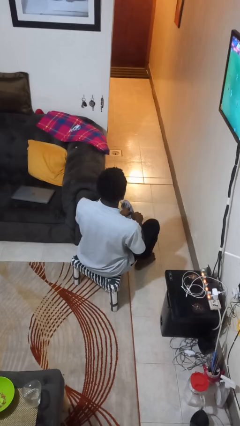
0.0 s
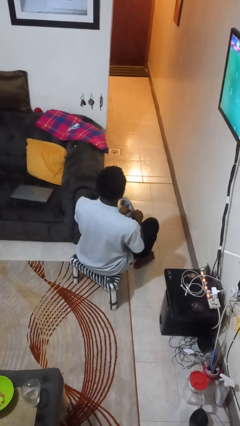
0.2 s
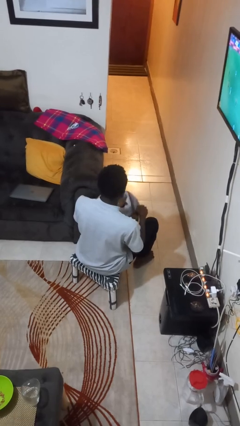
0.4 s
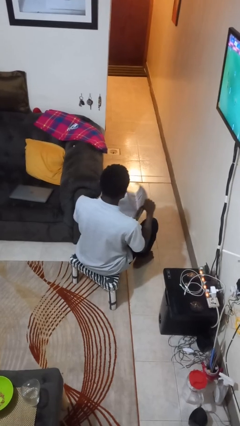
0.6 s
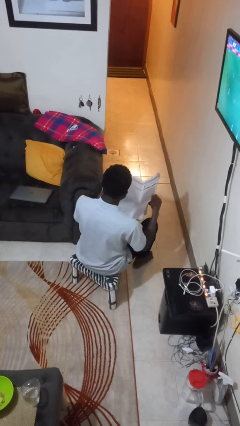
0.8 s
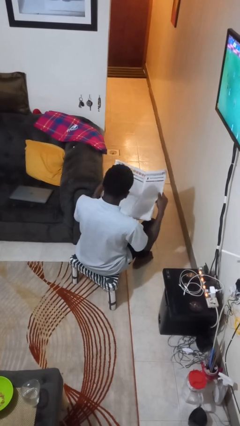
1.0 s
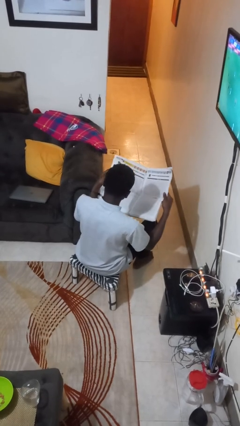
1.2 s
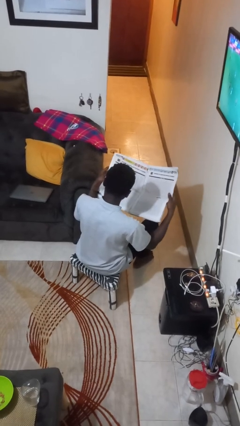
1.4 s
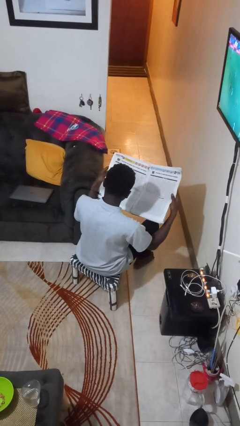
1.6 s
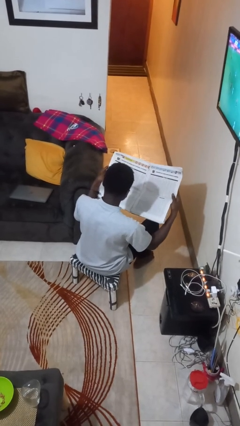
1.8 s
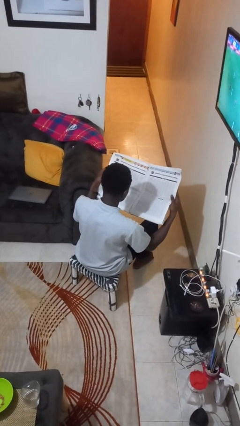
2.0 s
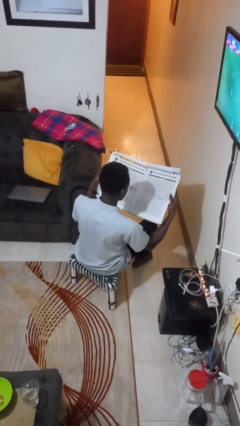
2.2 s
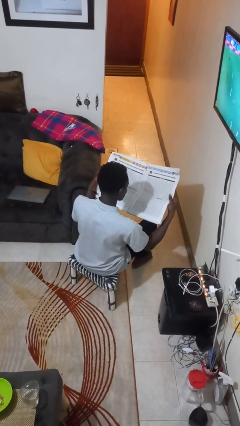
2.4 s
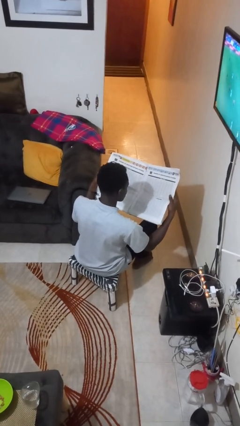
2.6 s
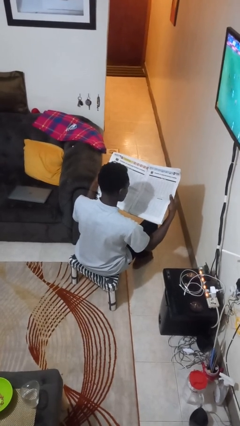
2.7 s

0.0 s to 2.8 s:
person reads newspaper

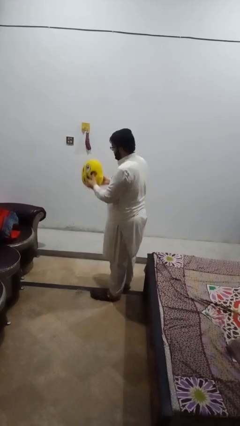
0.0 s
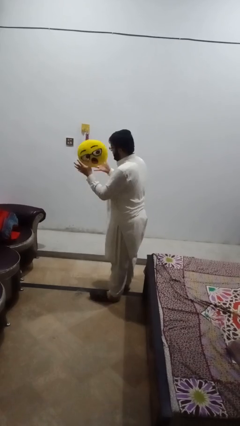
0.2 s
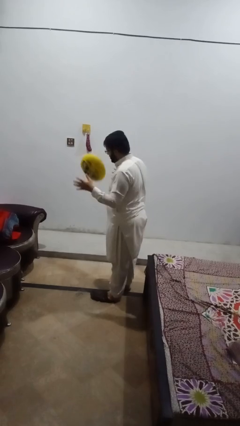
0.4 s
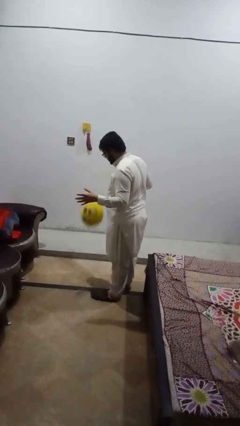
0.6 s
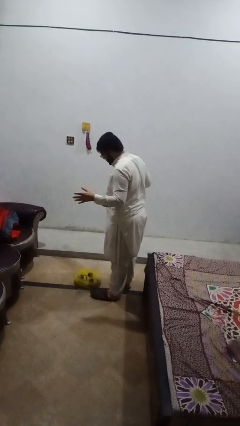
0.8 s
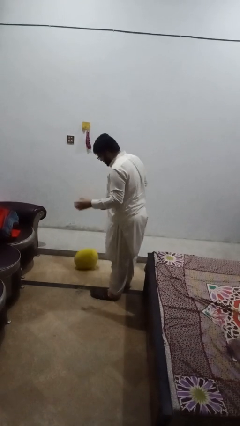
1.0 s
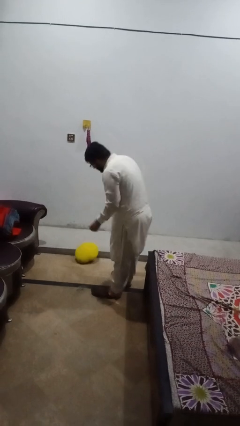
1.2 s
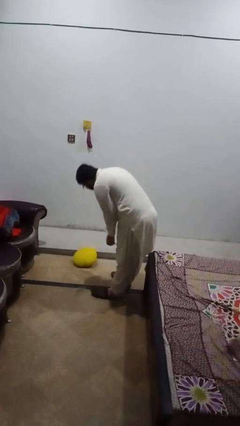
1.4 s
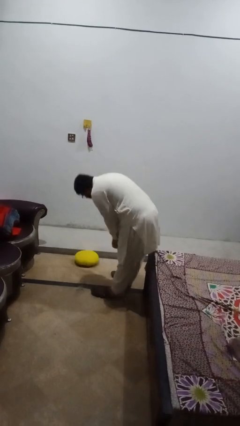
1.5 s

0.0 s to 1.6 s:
person drops object

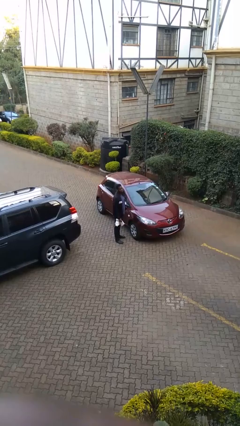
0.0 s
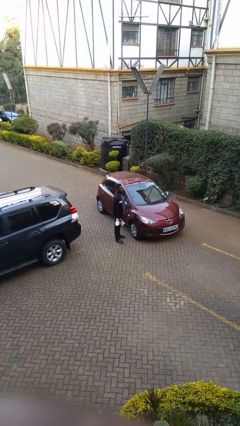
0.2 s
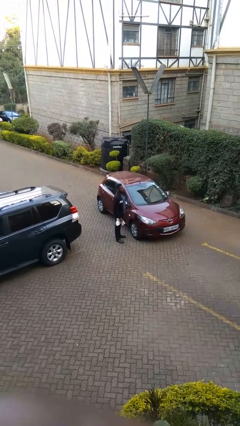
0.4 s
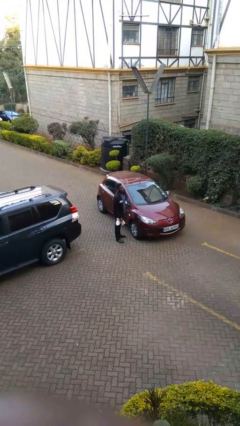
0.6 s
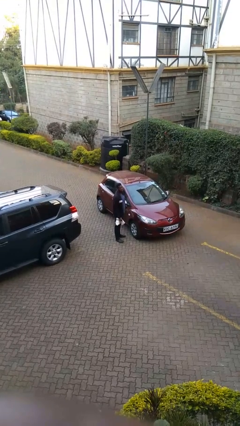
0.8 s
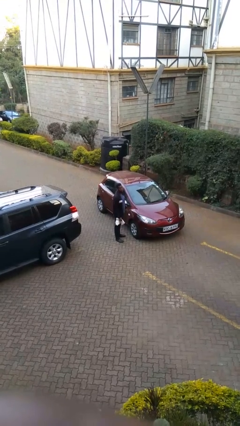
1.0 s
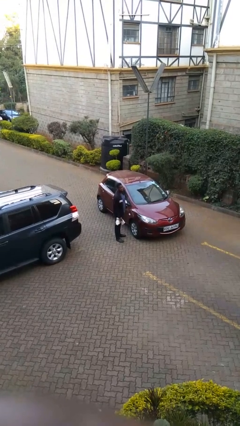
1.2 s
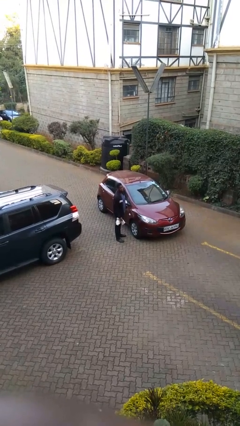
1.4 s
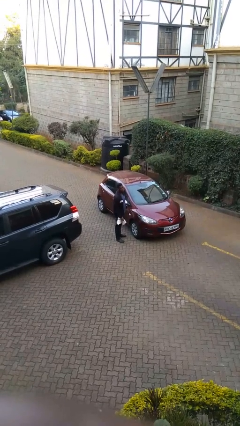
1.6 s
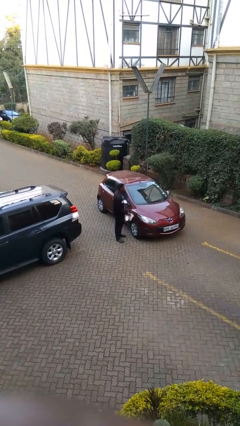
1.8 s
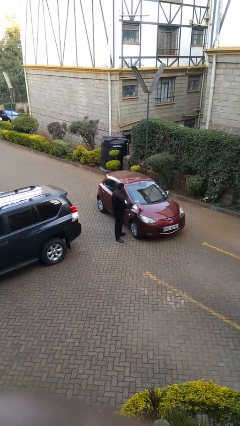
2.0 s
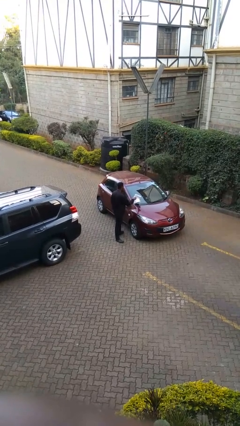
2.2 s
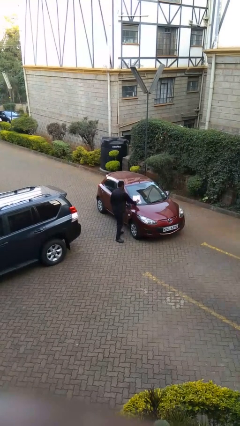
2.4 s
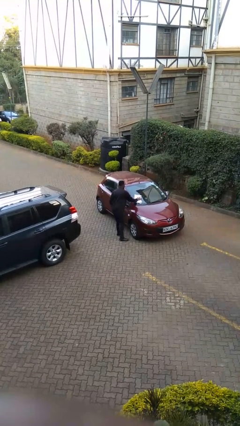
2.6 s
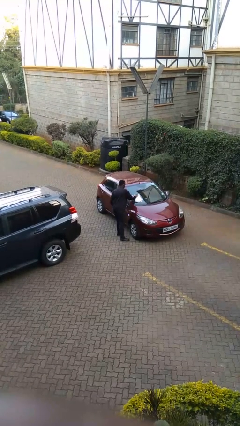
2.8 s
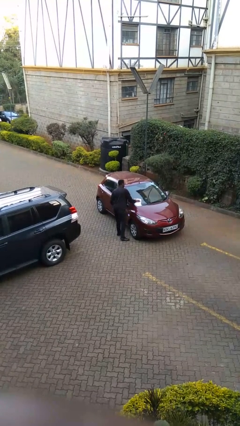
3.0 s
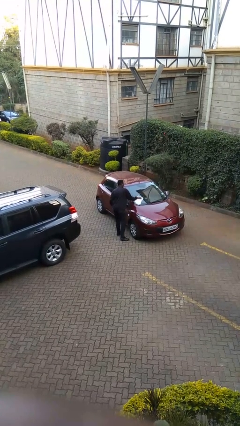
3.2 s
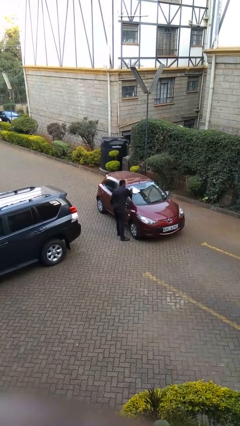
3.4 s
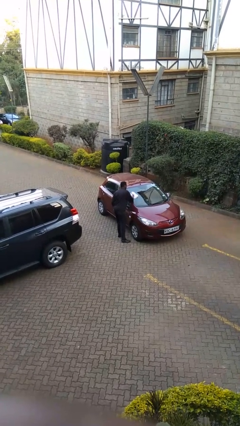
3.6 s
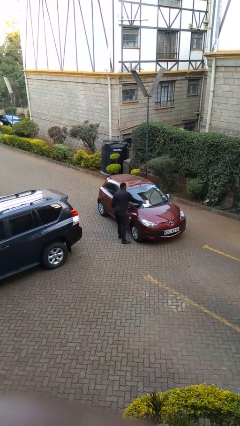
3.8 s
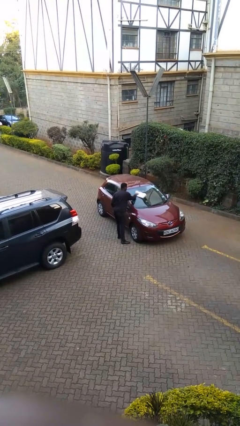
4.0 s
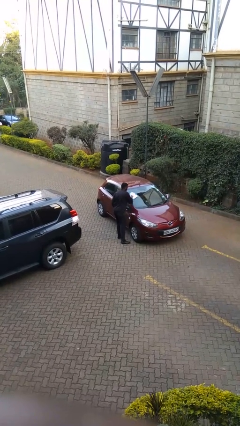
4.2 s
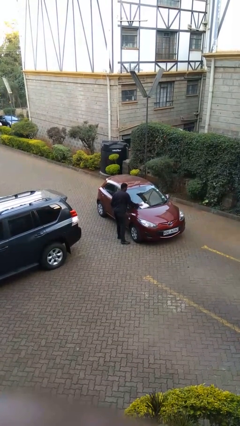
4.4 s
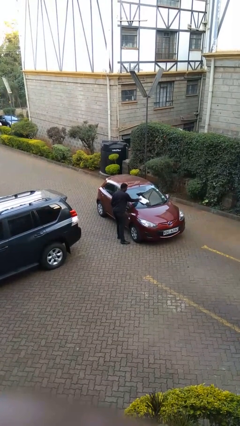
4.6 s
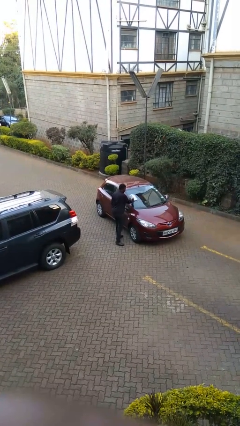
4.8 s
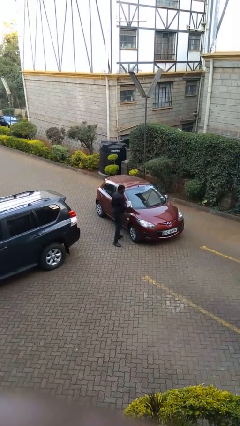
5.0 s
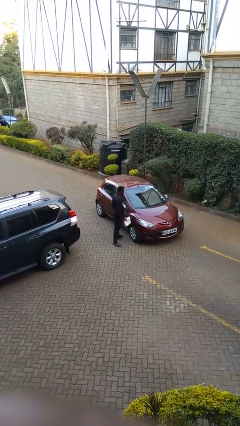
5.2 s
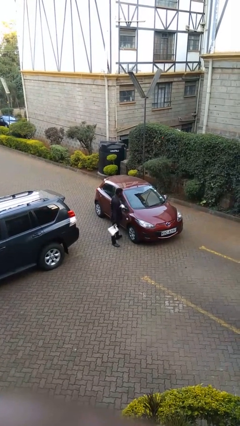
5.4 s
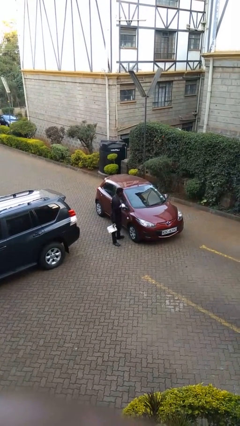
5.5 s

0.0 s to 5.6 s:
person polishes car with rag

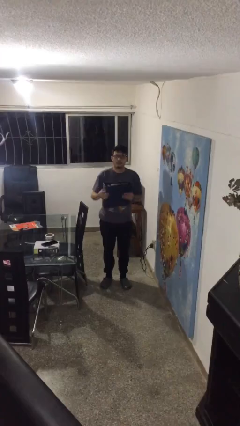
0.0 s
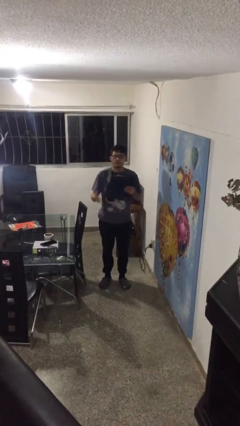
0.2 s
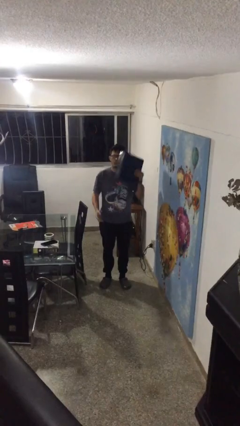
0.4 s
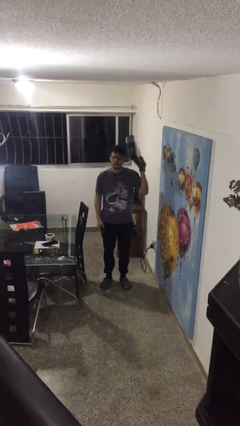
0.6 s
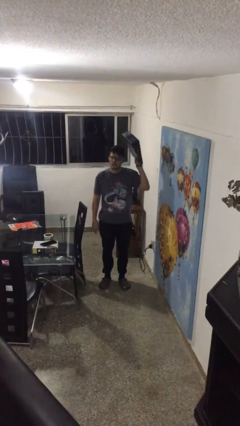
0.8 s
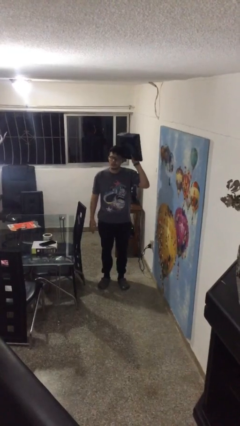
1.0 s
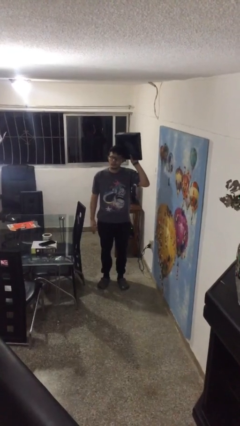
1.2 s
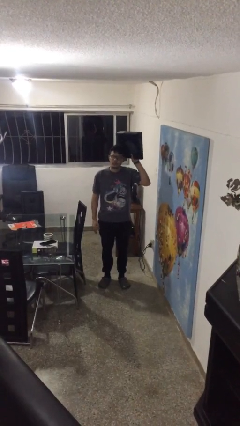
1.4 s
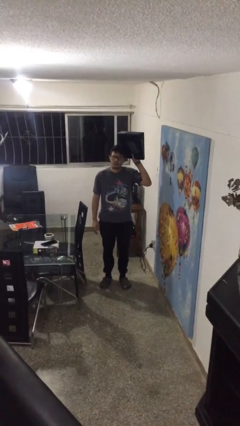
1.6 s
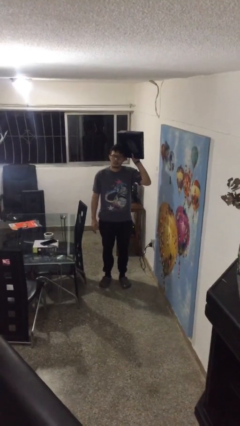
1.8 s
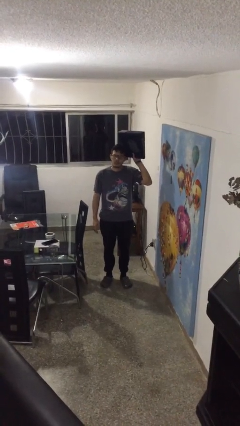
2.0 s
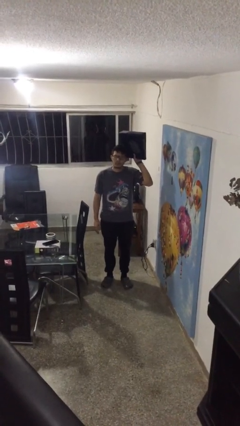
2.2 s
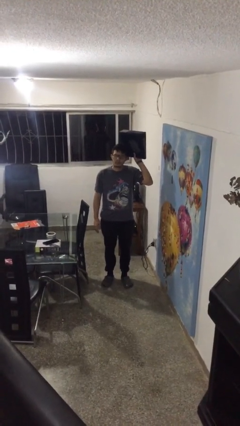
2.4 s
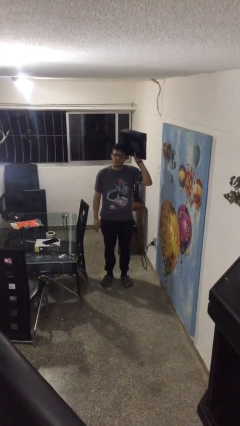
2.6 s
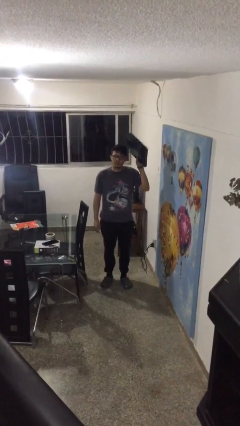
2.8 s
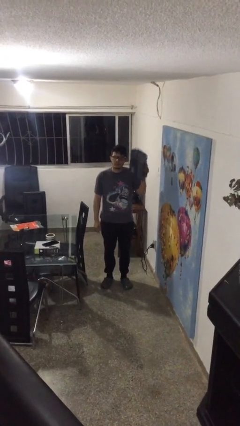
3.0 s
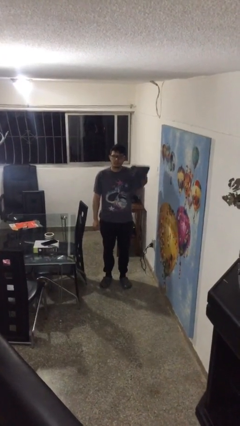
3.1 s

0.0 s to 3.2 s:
person holds object above head

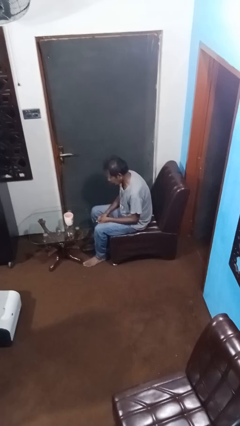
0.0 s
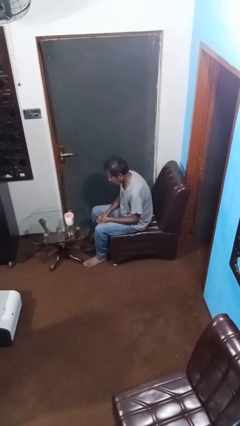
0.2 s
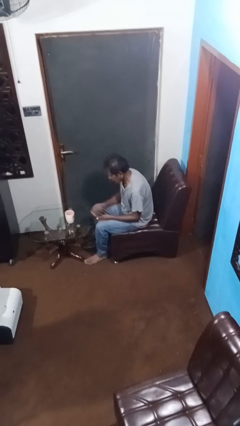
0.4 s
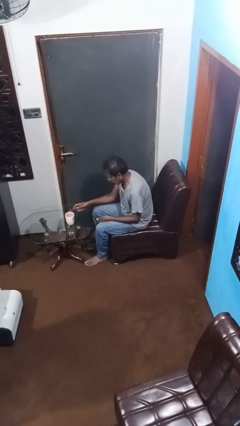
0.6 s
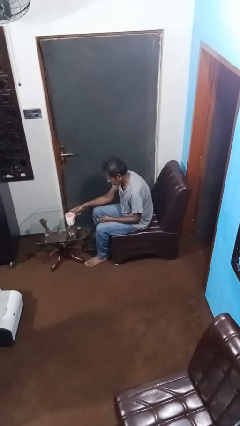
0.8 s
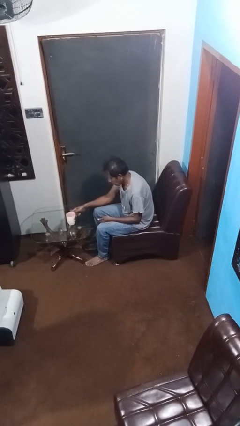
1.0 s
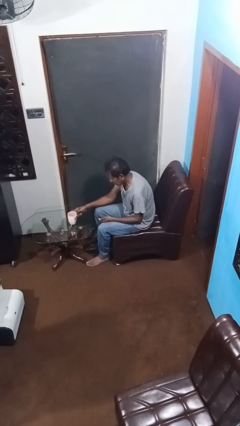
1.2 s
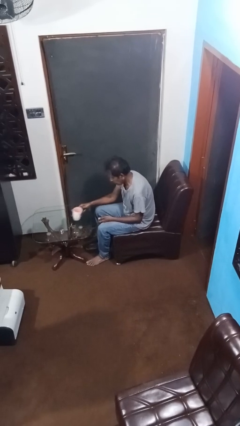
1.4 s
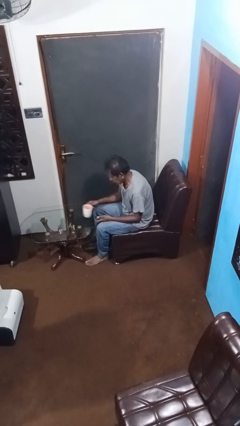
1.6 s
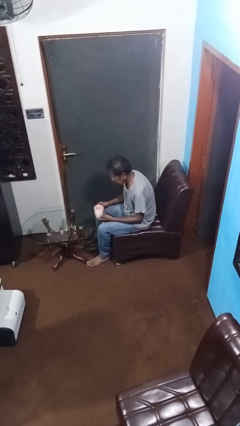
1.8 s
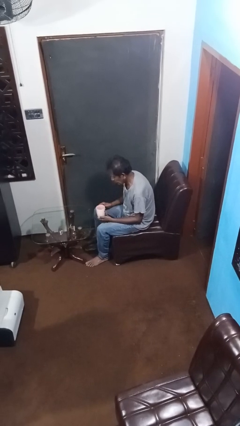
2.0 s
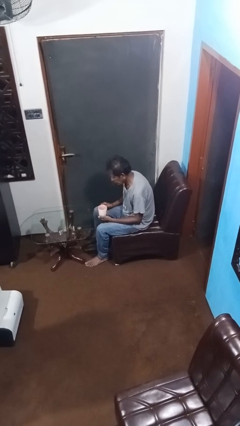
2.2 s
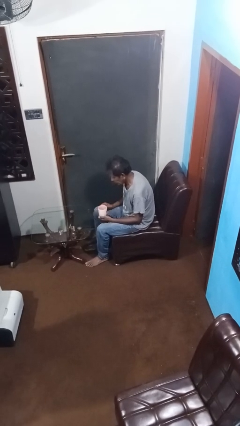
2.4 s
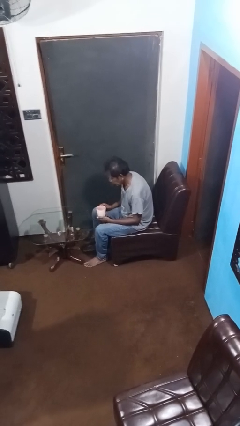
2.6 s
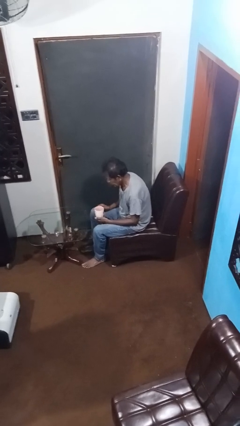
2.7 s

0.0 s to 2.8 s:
person picks up object from table

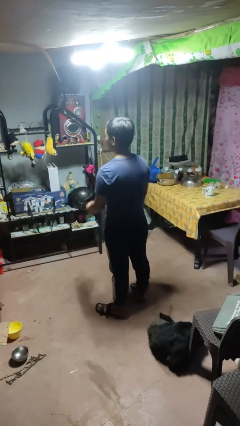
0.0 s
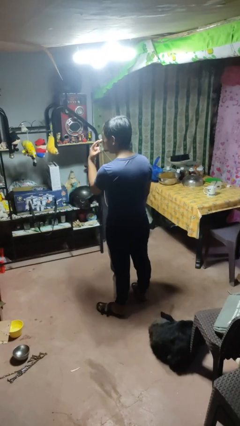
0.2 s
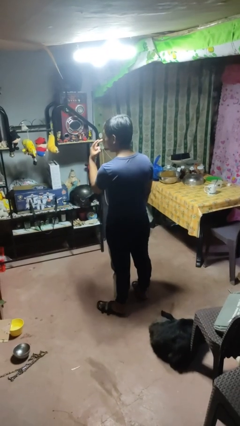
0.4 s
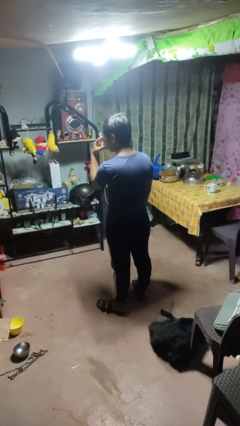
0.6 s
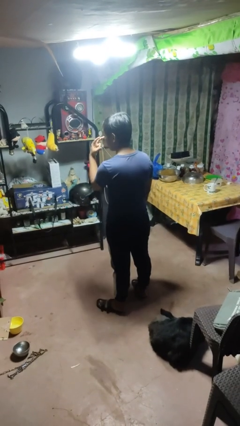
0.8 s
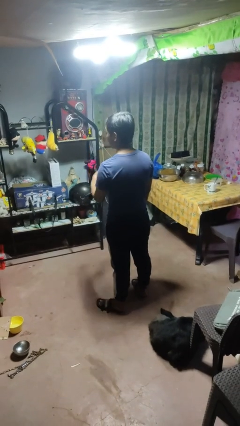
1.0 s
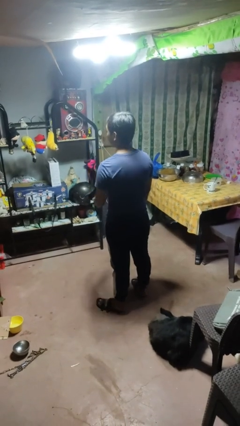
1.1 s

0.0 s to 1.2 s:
person gestures watch closely
